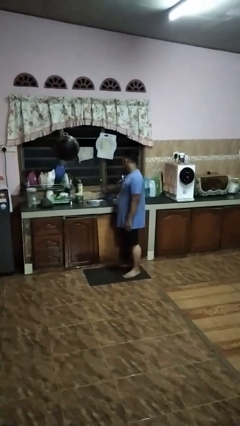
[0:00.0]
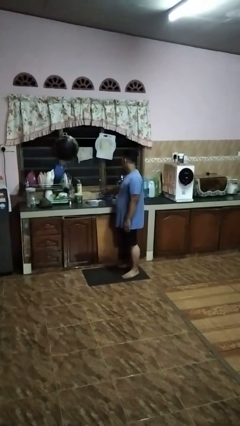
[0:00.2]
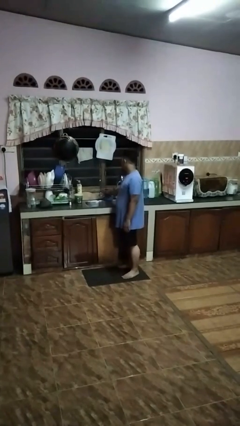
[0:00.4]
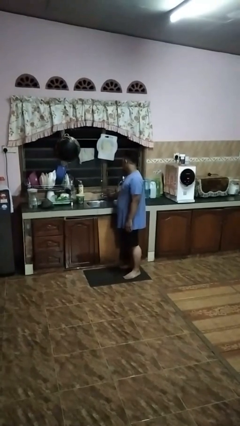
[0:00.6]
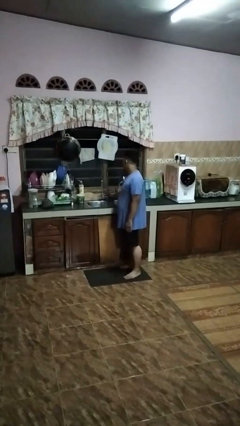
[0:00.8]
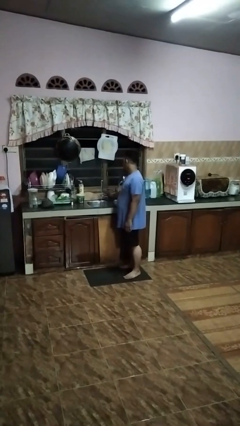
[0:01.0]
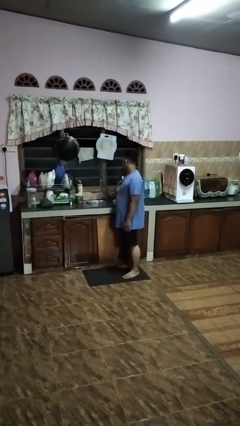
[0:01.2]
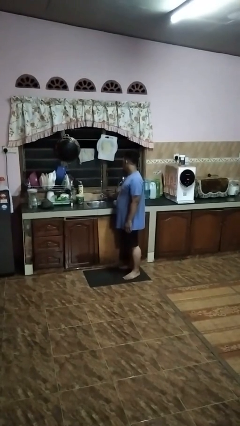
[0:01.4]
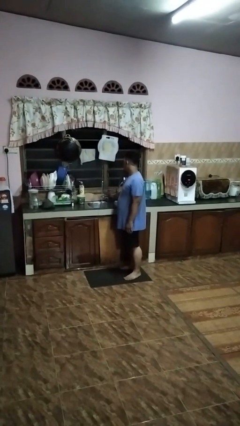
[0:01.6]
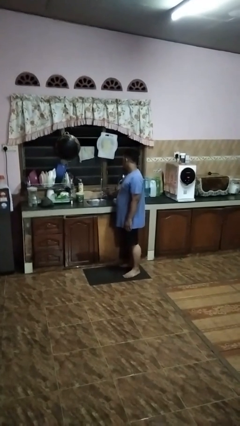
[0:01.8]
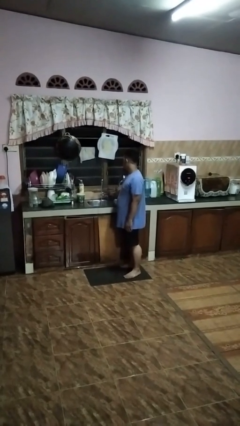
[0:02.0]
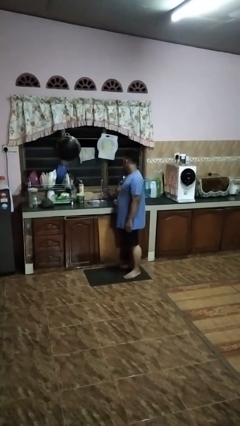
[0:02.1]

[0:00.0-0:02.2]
person turns on faucet

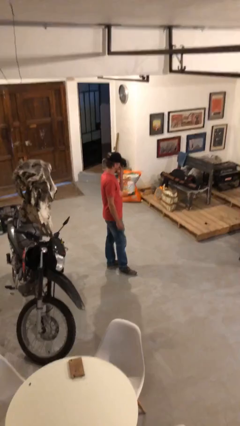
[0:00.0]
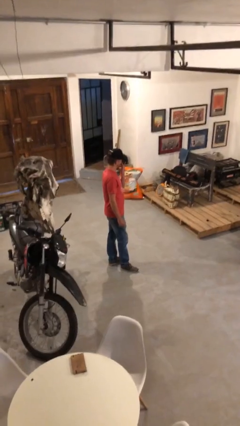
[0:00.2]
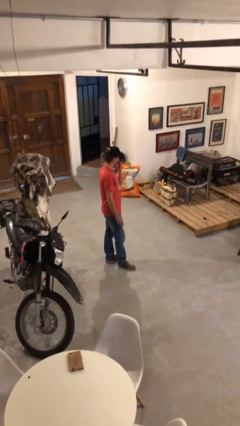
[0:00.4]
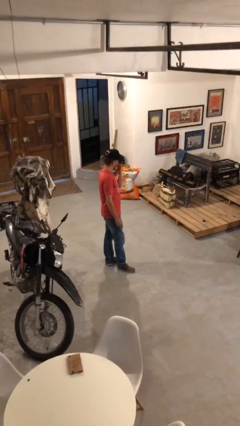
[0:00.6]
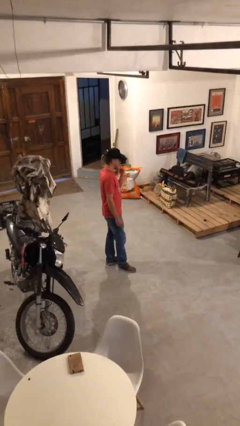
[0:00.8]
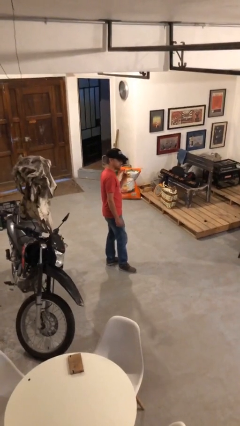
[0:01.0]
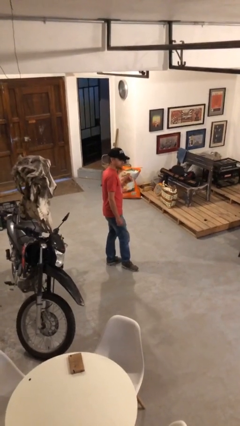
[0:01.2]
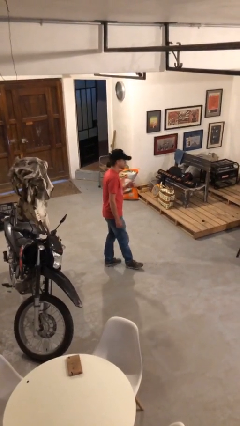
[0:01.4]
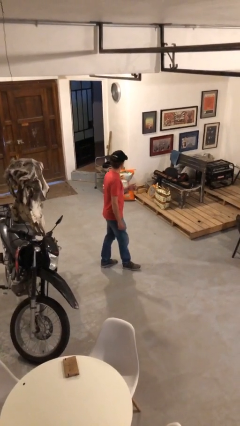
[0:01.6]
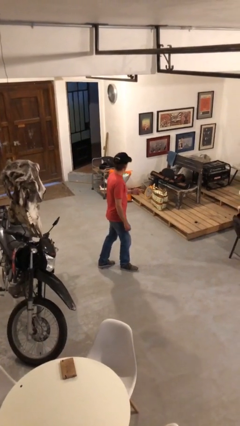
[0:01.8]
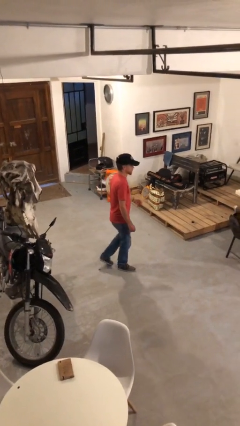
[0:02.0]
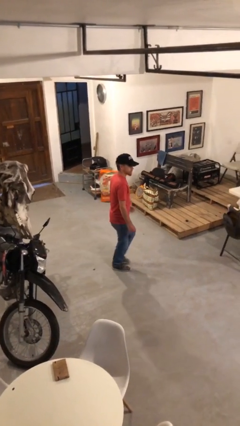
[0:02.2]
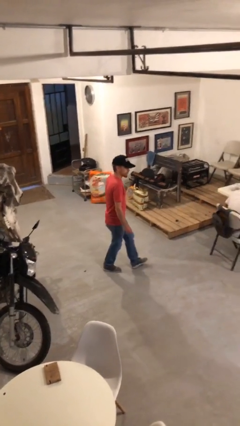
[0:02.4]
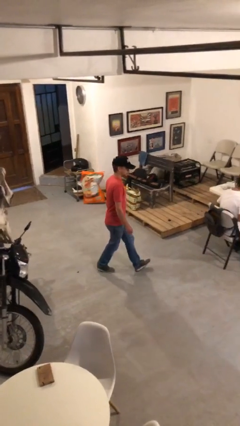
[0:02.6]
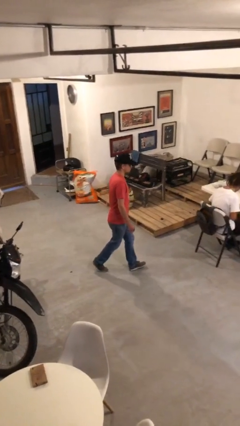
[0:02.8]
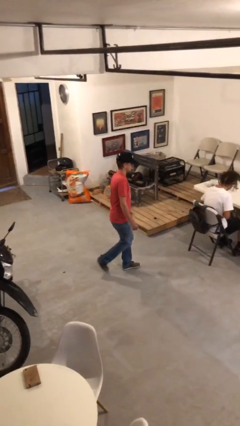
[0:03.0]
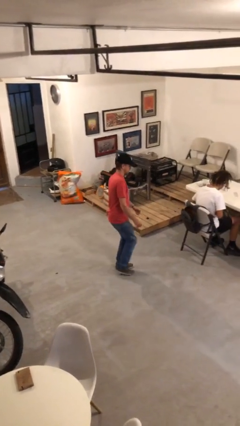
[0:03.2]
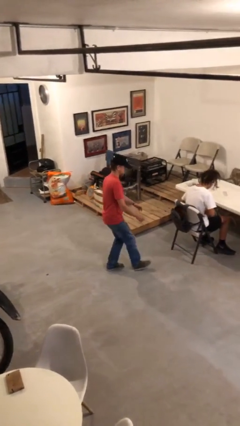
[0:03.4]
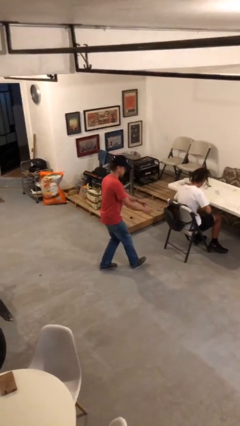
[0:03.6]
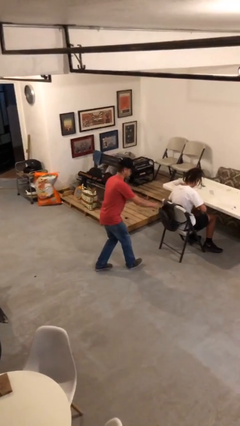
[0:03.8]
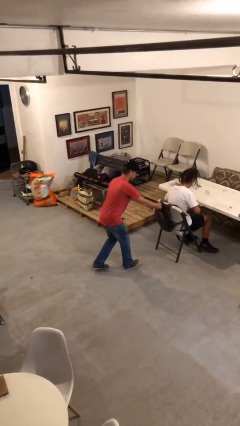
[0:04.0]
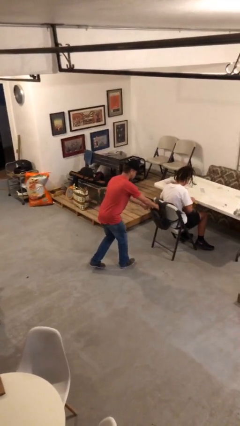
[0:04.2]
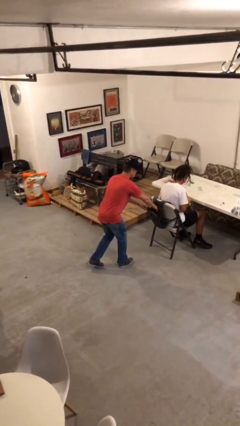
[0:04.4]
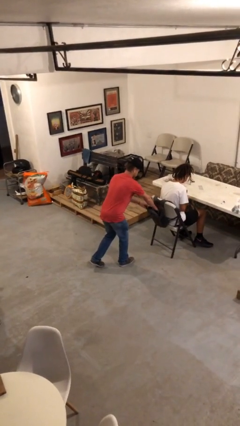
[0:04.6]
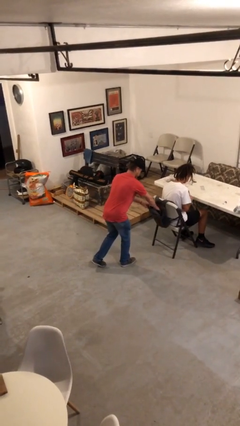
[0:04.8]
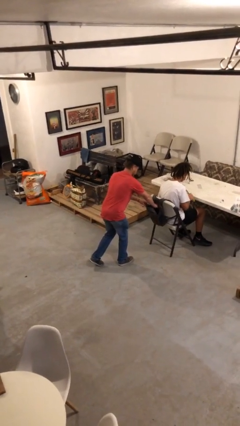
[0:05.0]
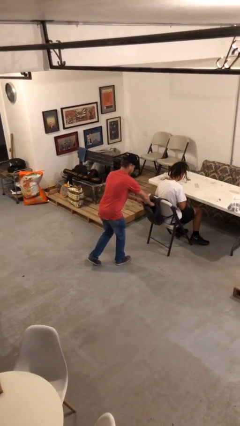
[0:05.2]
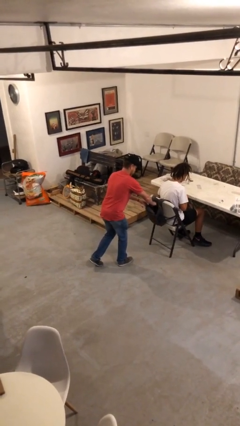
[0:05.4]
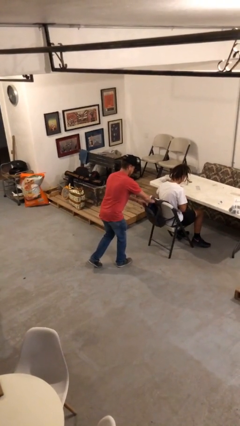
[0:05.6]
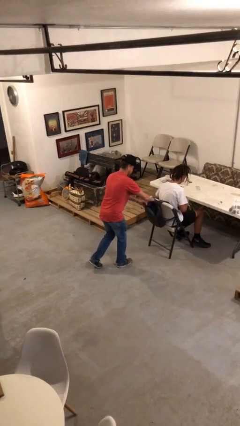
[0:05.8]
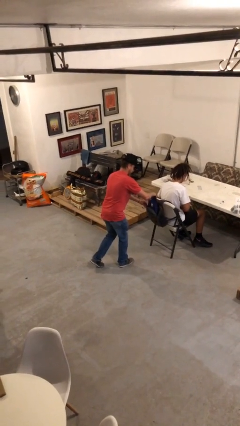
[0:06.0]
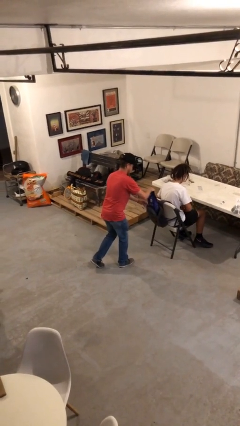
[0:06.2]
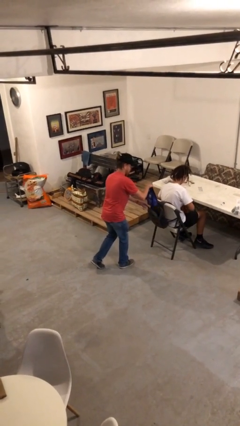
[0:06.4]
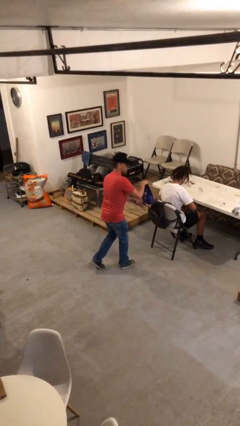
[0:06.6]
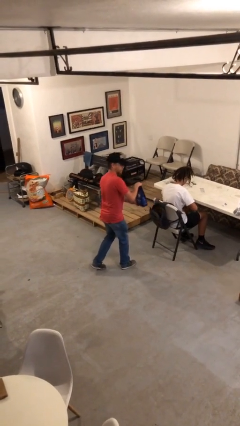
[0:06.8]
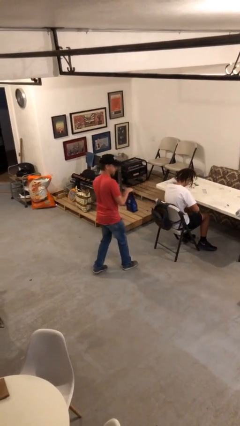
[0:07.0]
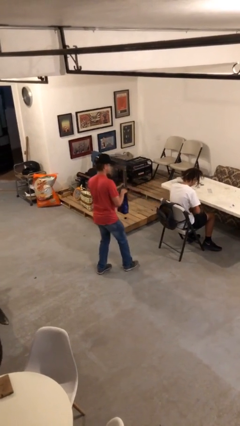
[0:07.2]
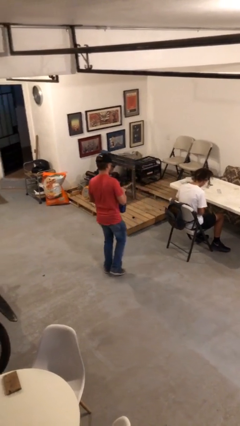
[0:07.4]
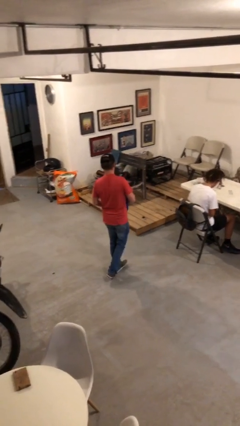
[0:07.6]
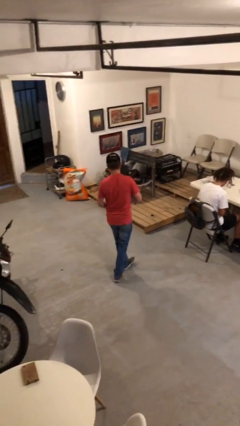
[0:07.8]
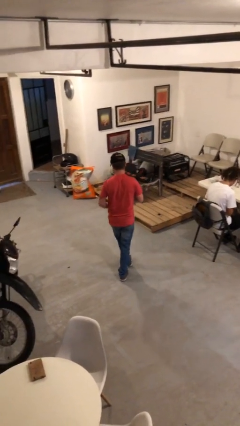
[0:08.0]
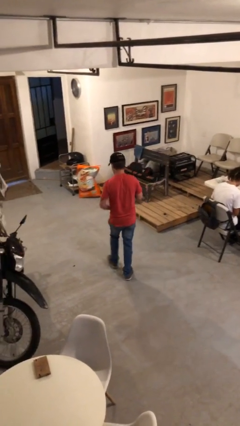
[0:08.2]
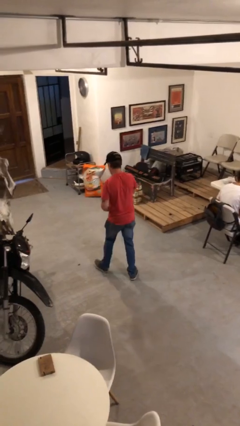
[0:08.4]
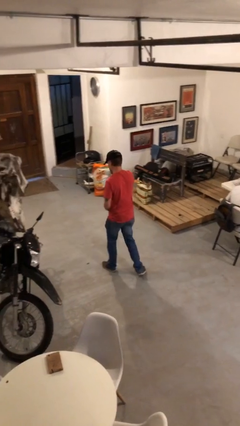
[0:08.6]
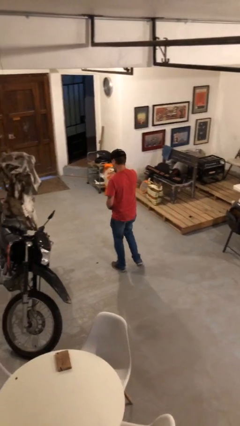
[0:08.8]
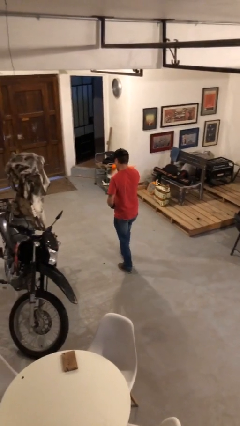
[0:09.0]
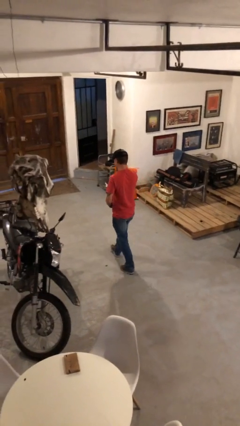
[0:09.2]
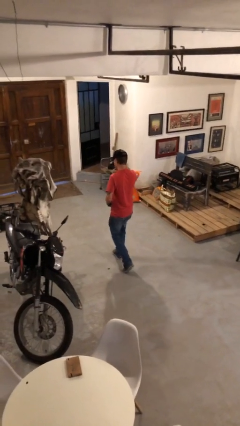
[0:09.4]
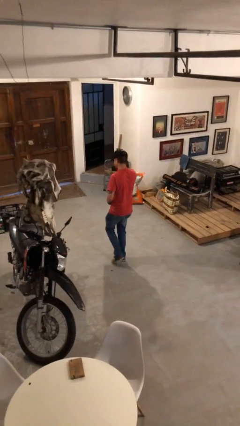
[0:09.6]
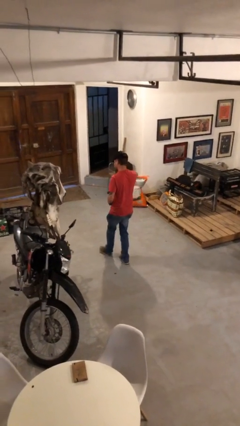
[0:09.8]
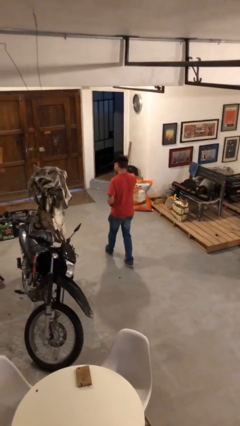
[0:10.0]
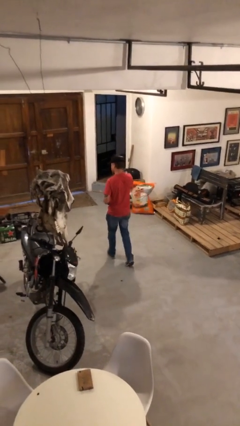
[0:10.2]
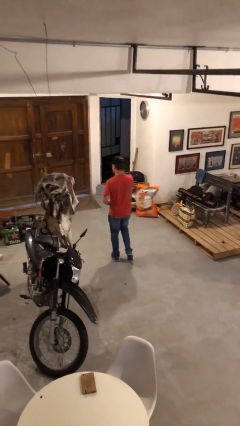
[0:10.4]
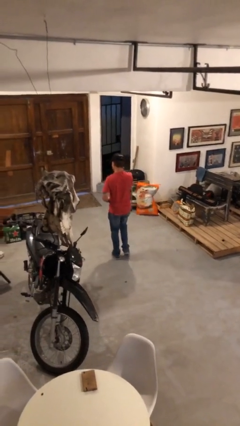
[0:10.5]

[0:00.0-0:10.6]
person steals object from person

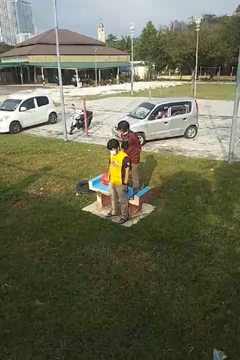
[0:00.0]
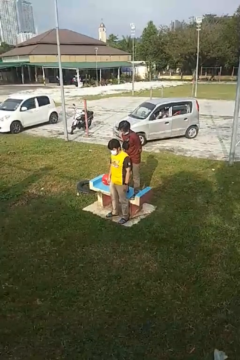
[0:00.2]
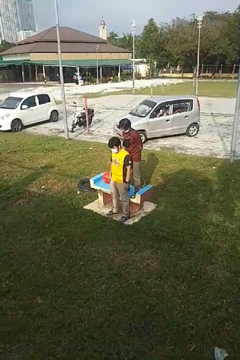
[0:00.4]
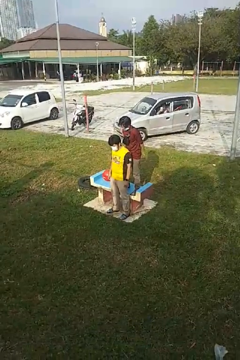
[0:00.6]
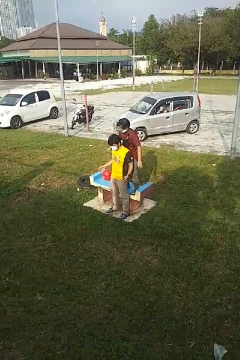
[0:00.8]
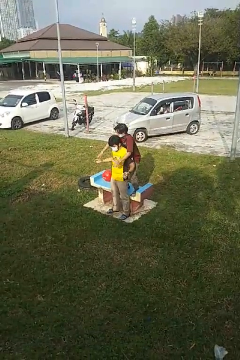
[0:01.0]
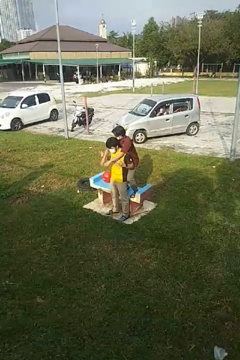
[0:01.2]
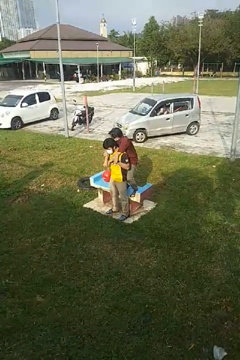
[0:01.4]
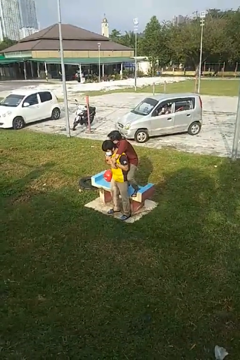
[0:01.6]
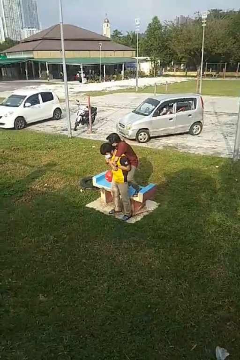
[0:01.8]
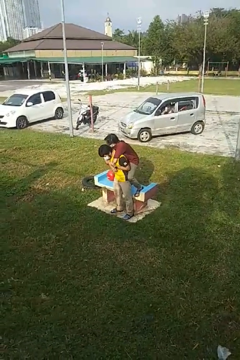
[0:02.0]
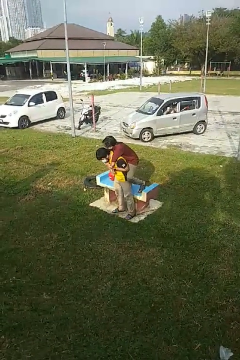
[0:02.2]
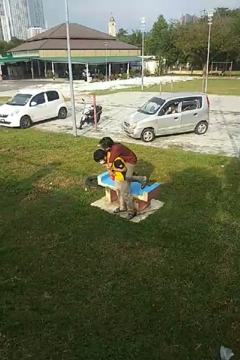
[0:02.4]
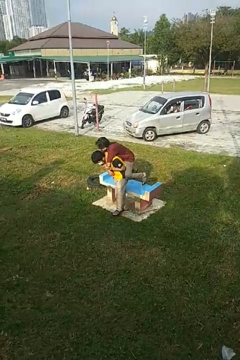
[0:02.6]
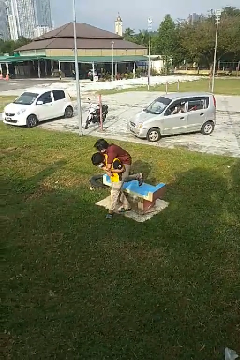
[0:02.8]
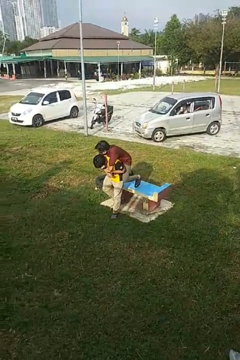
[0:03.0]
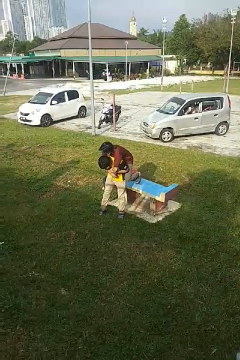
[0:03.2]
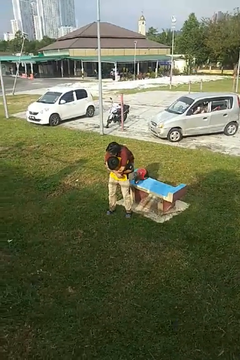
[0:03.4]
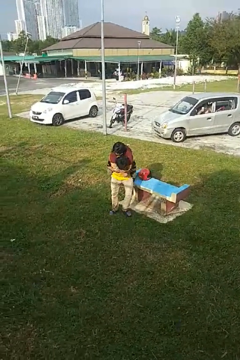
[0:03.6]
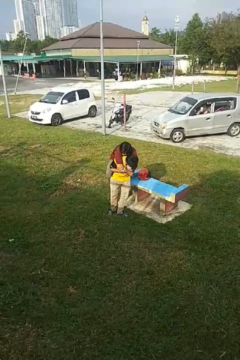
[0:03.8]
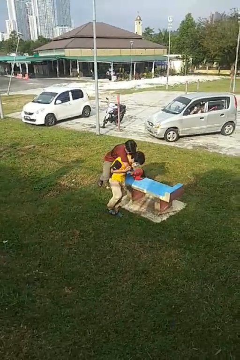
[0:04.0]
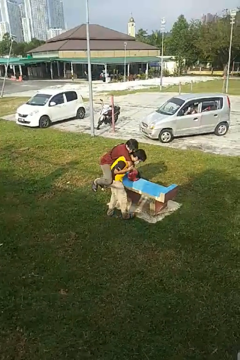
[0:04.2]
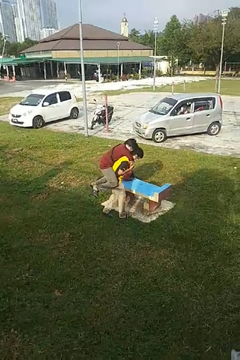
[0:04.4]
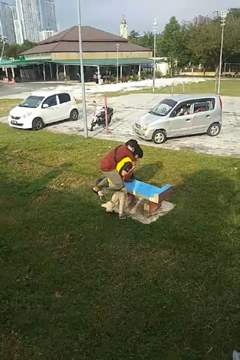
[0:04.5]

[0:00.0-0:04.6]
person carries person over shoulder

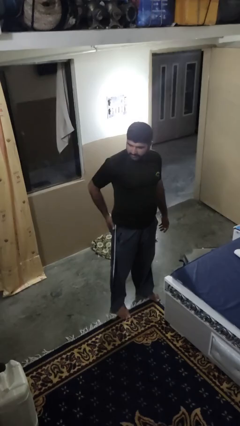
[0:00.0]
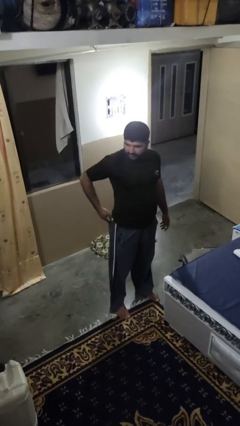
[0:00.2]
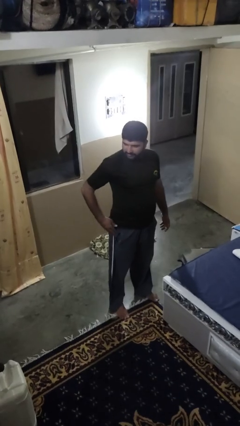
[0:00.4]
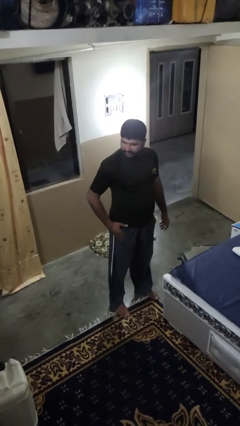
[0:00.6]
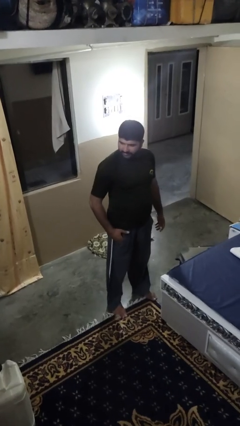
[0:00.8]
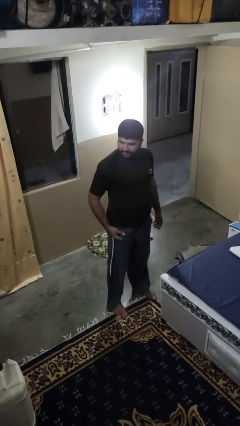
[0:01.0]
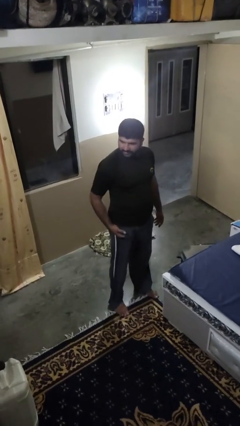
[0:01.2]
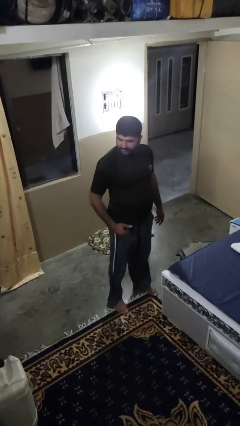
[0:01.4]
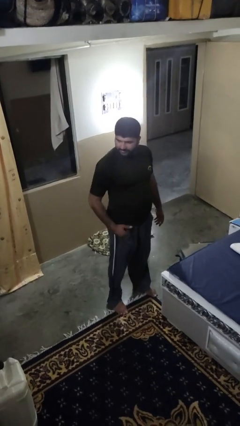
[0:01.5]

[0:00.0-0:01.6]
person puts hands in back pockets
